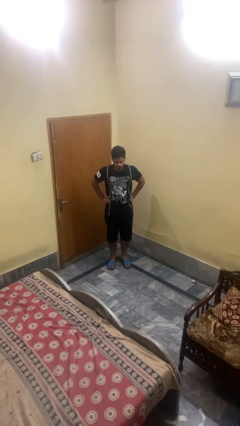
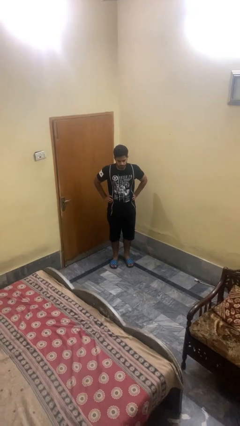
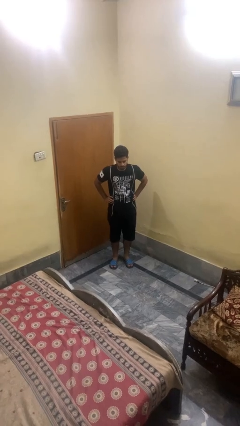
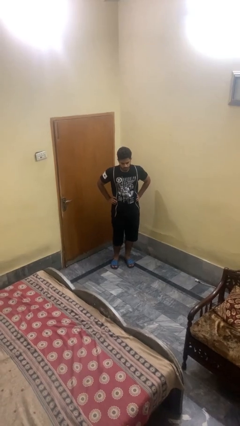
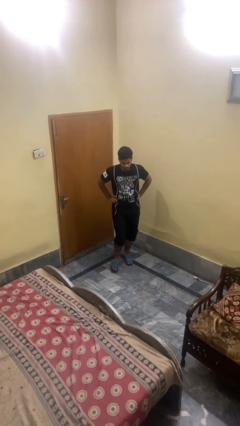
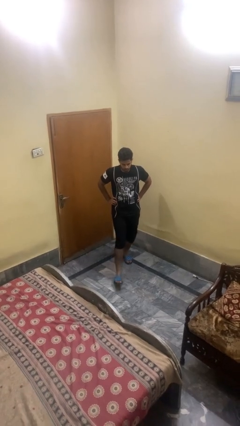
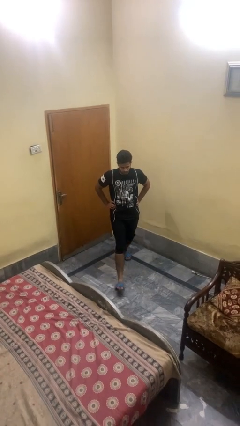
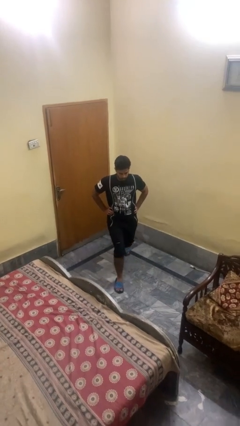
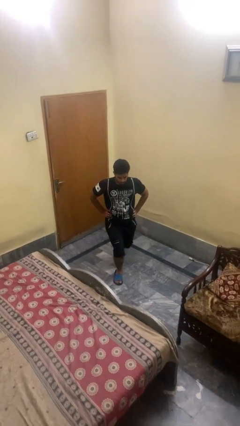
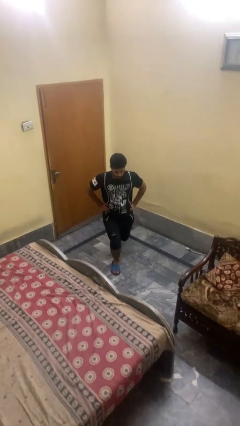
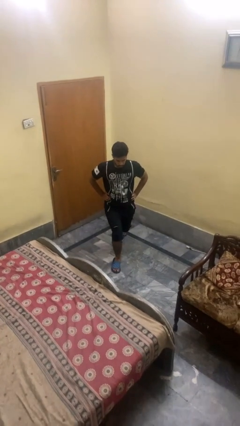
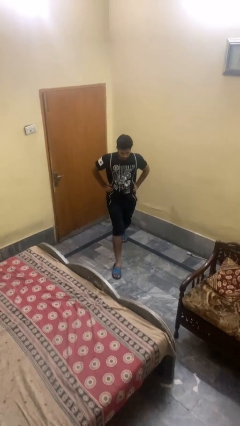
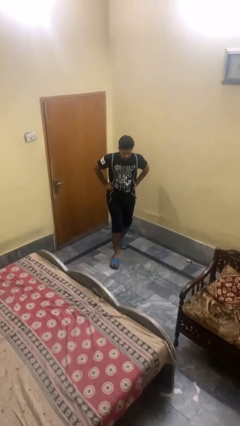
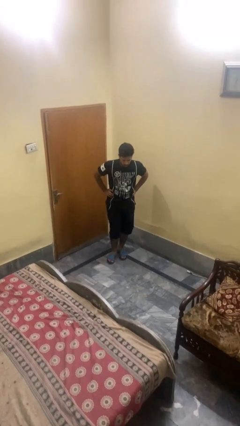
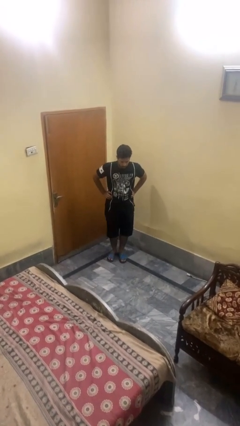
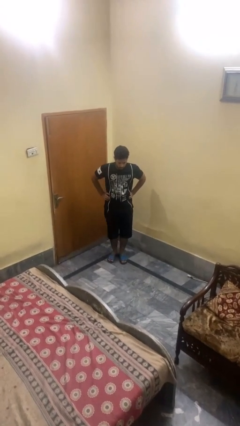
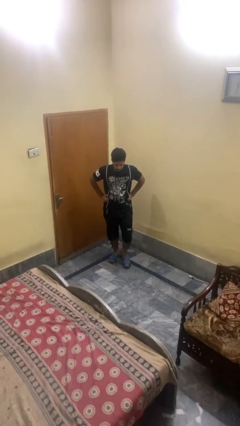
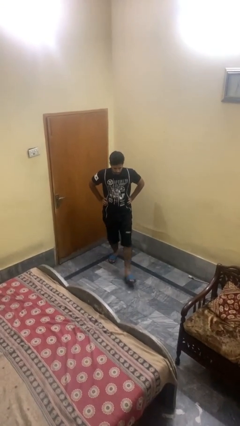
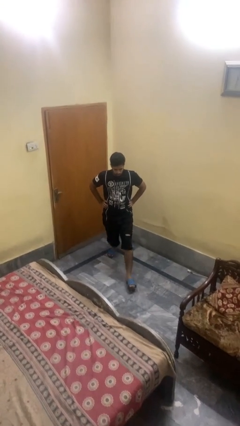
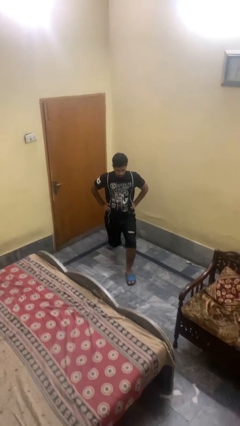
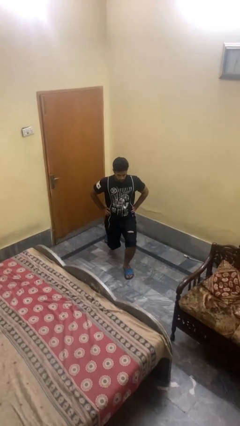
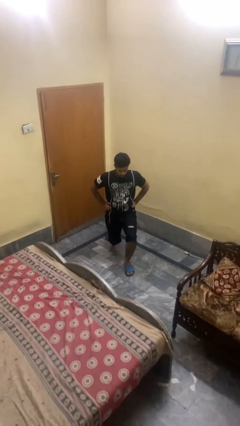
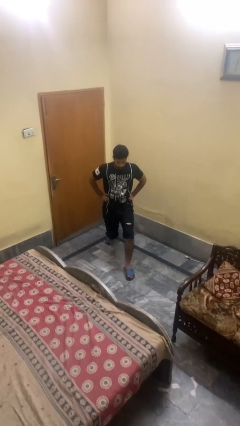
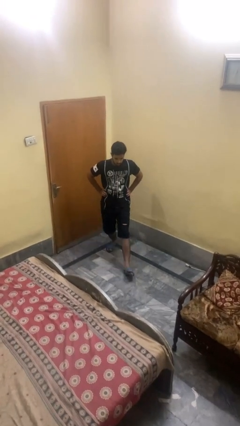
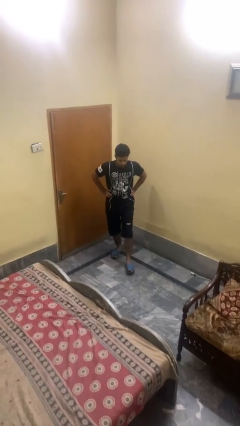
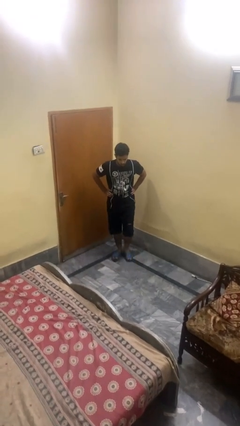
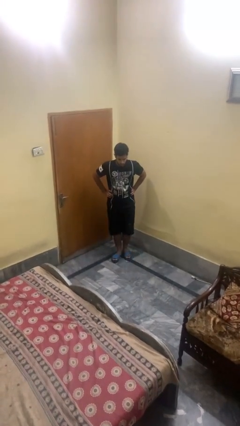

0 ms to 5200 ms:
person exercises with lunges

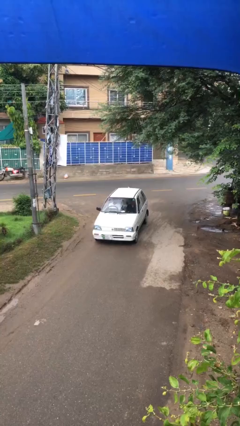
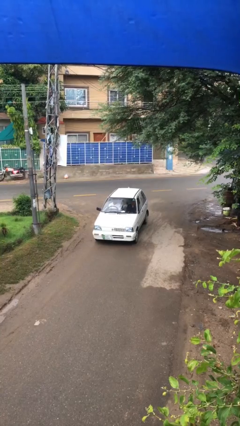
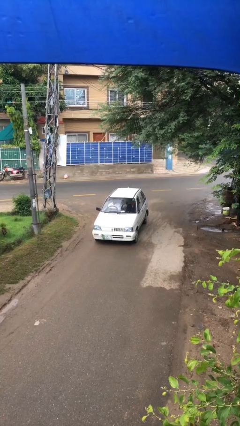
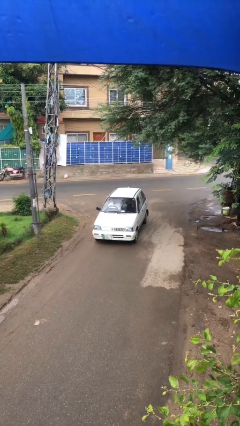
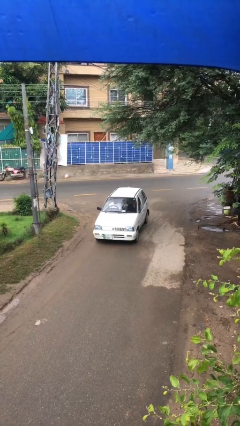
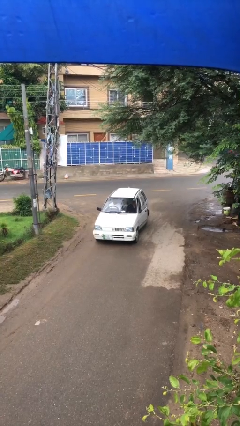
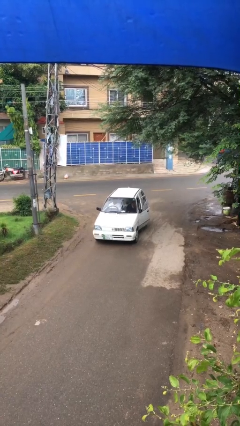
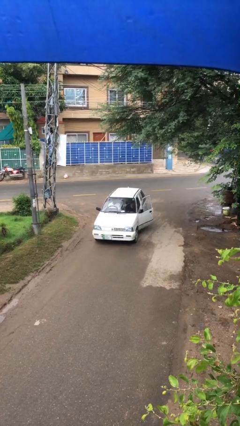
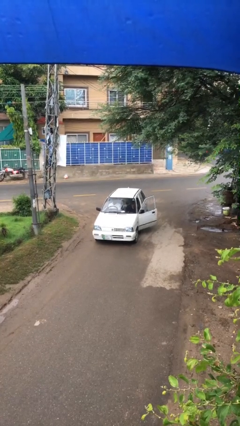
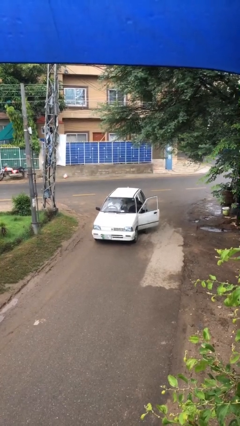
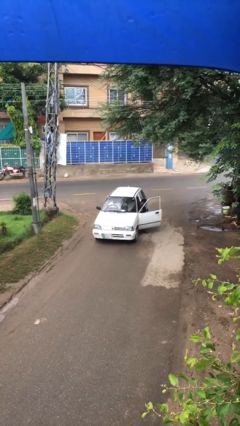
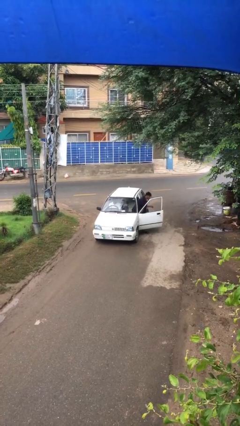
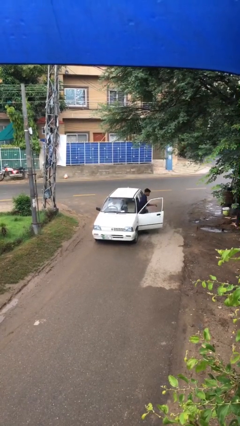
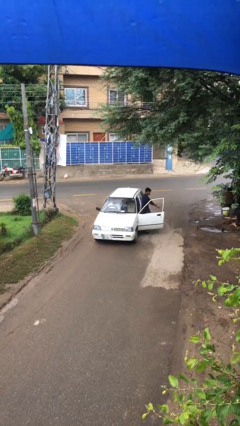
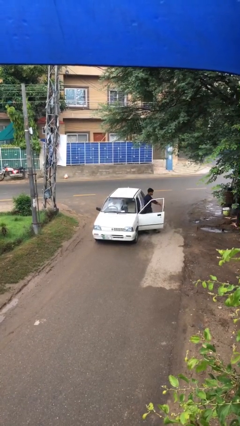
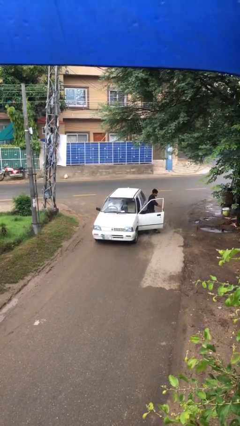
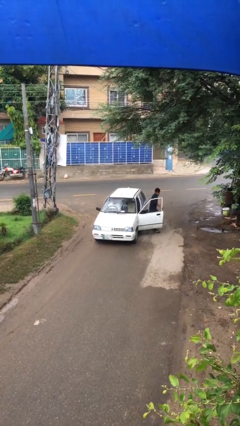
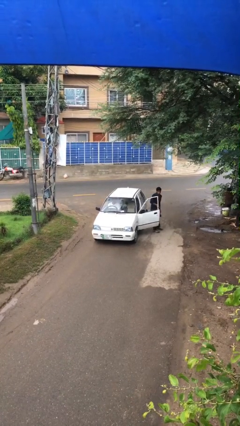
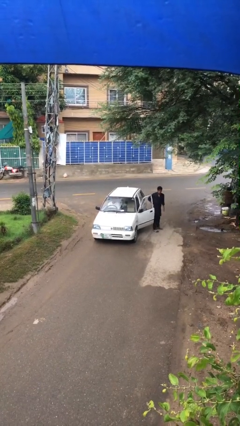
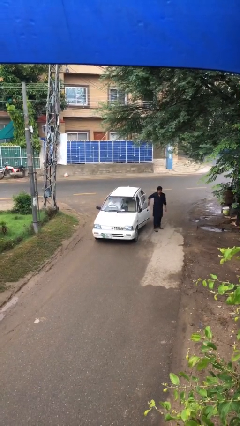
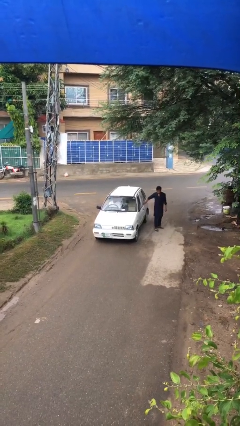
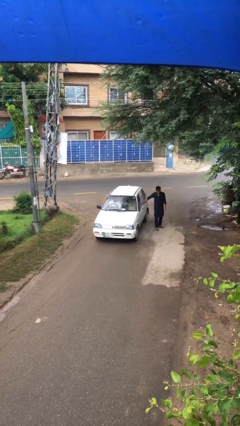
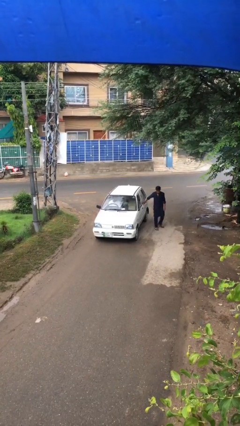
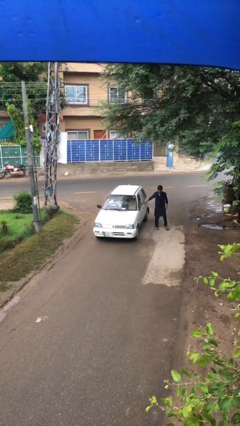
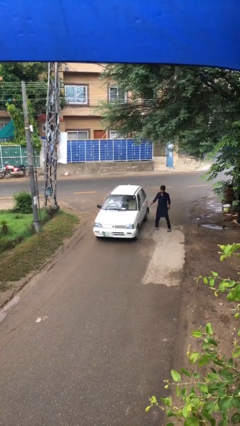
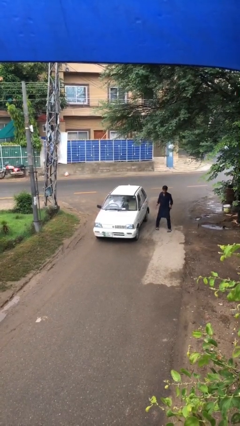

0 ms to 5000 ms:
car drops off person

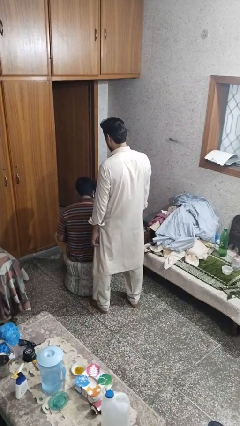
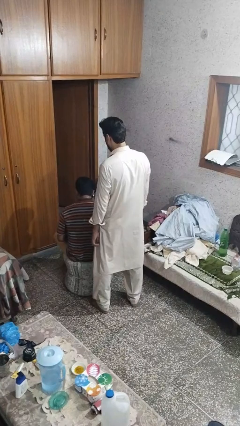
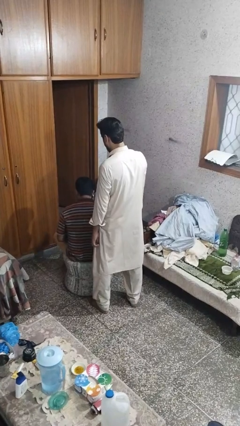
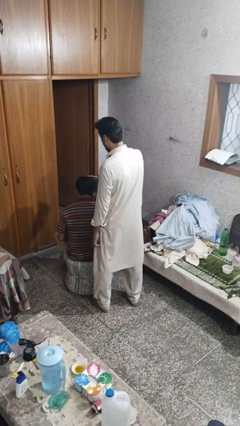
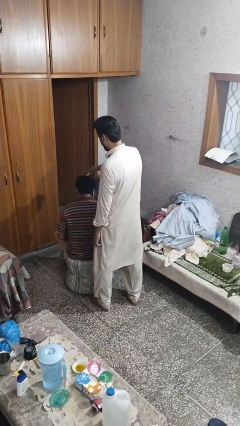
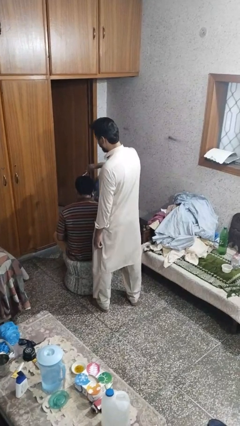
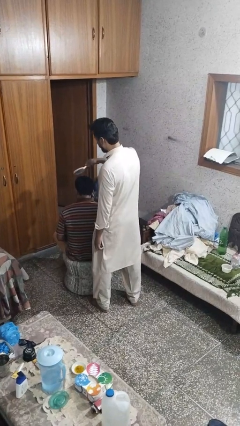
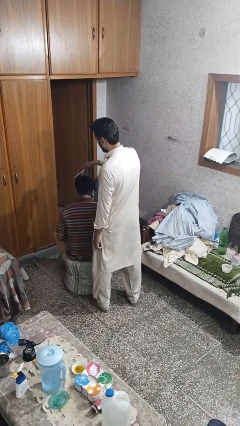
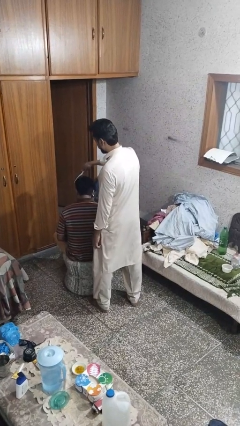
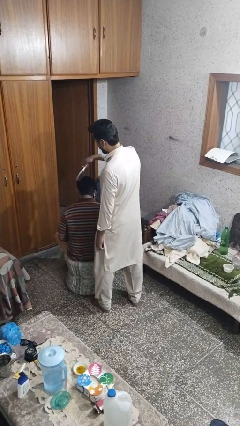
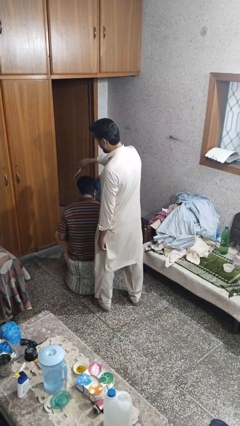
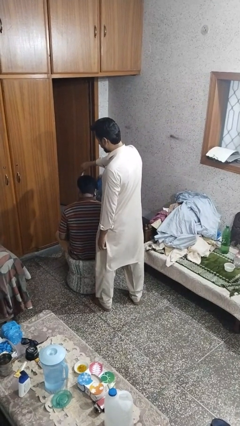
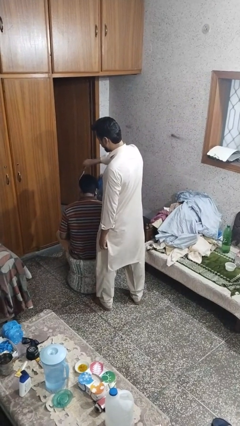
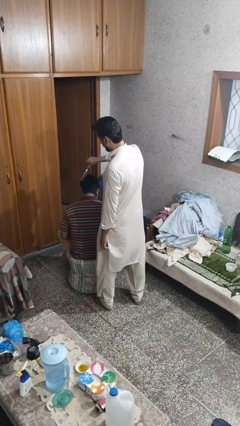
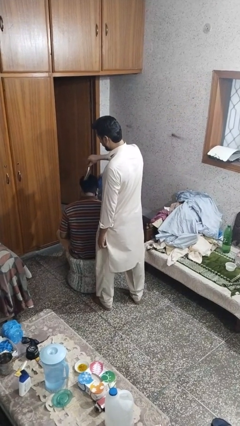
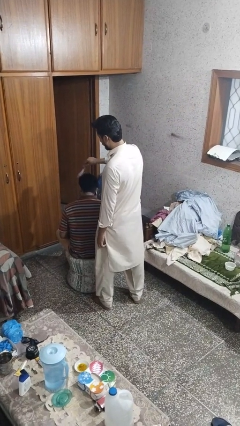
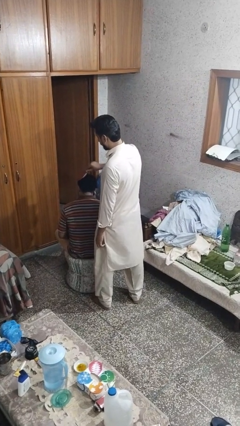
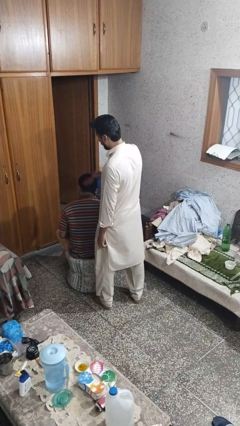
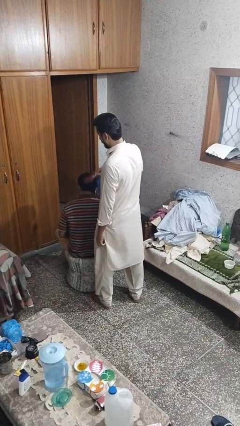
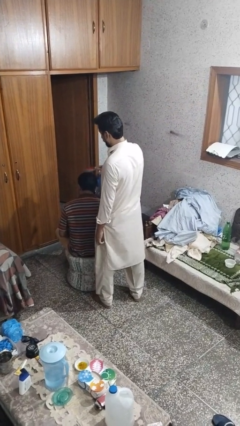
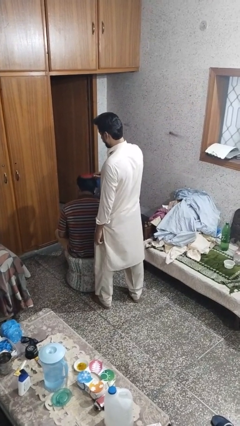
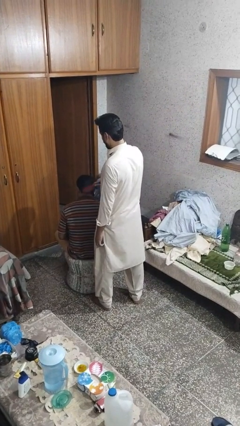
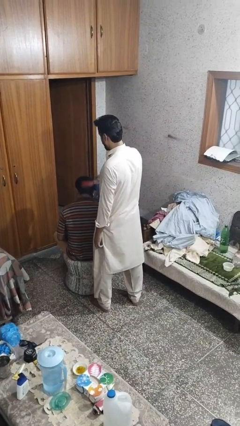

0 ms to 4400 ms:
person brushes hair of person

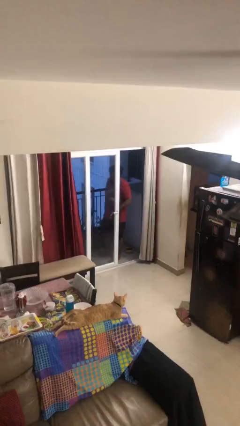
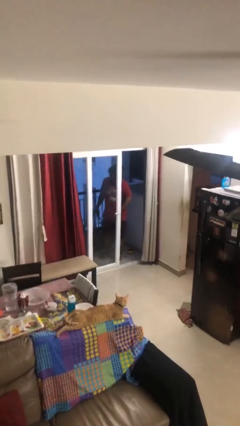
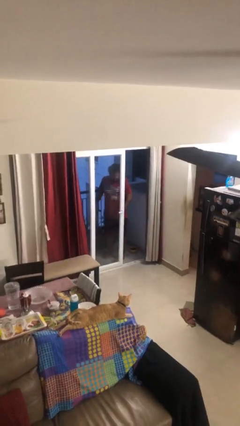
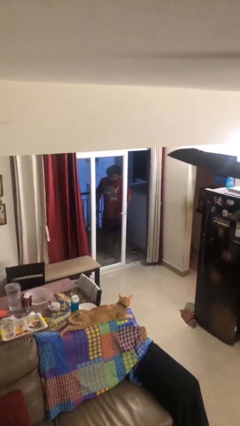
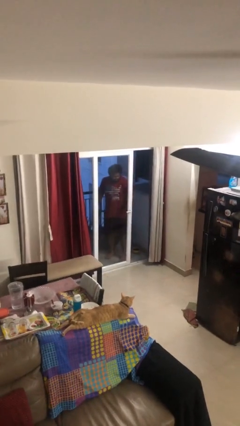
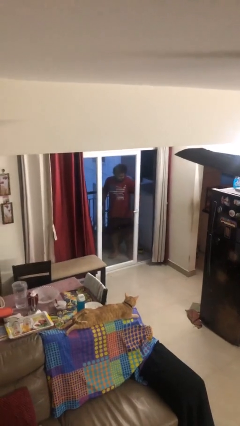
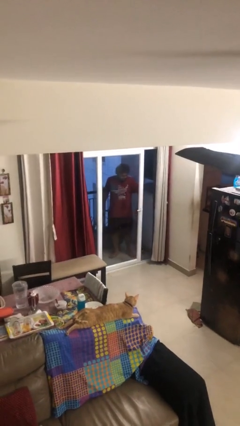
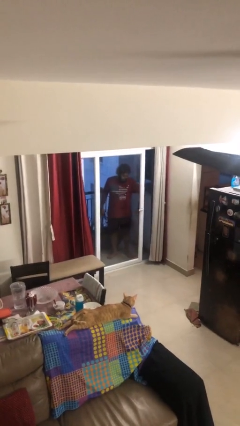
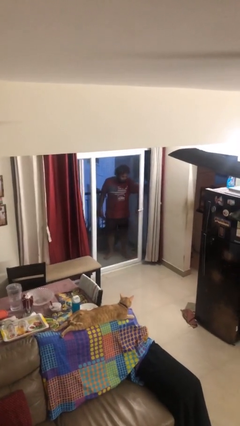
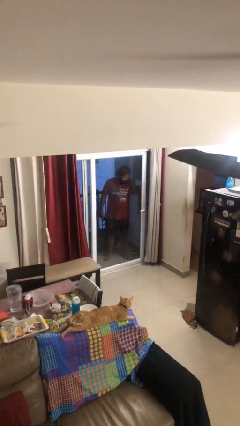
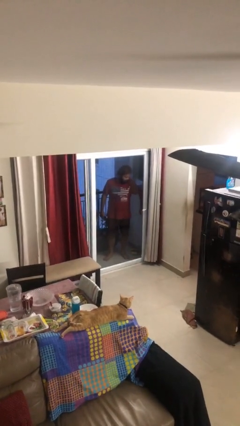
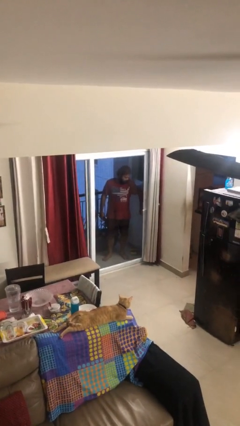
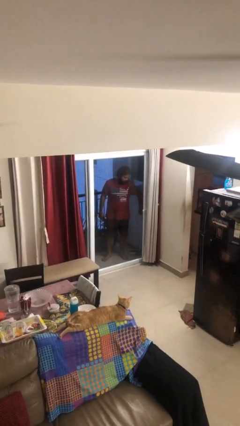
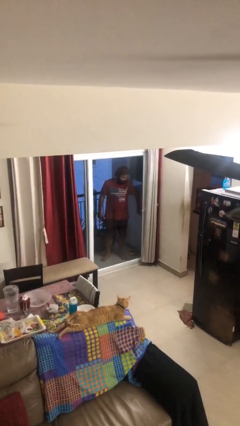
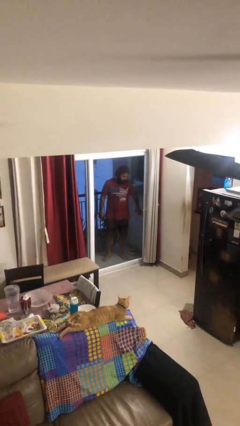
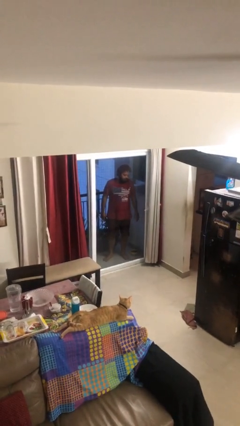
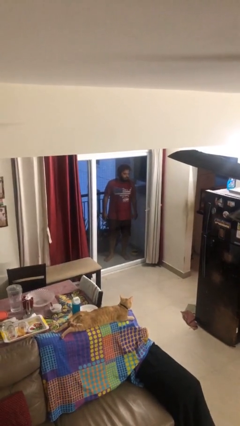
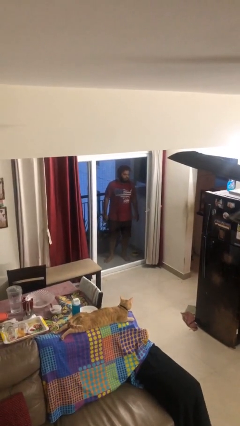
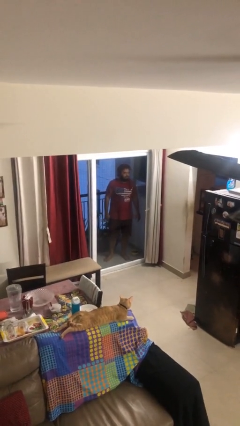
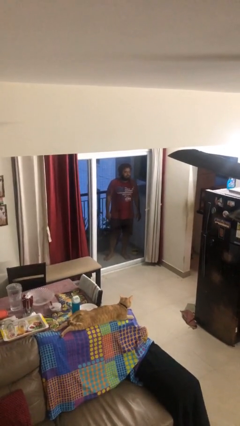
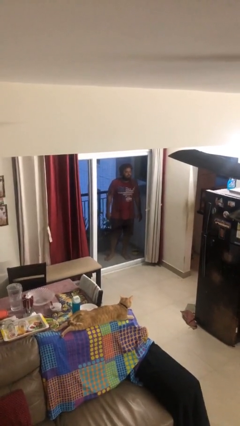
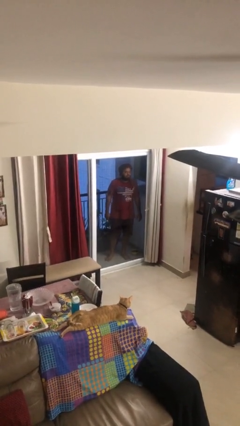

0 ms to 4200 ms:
person closes facility door
